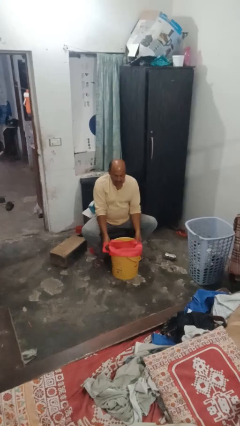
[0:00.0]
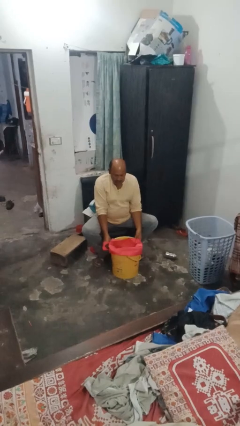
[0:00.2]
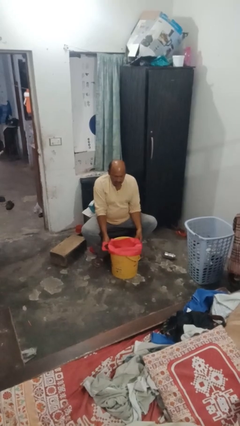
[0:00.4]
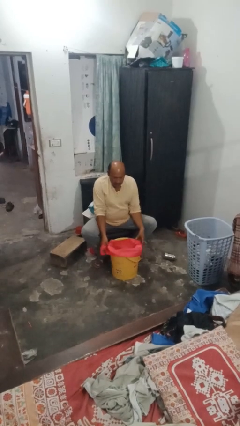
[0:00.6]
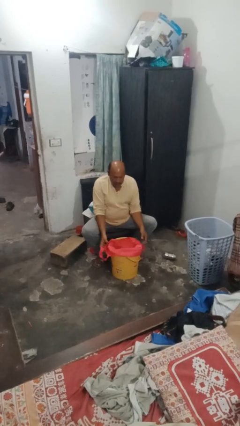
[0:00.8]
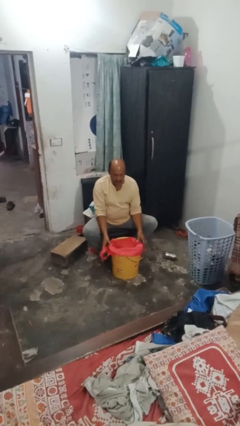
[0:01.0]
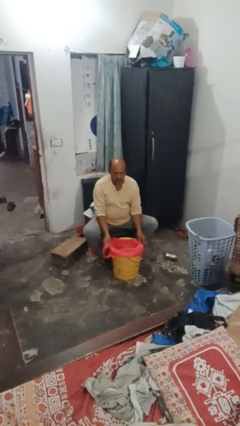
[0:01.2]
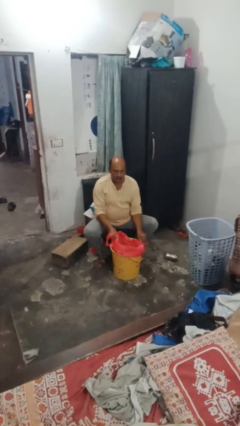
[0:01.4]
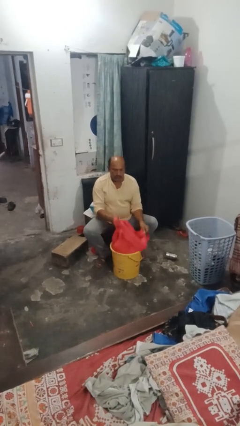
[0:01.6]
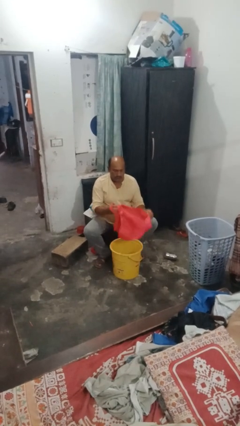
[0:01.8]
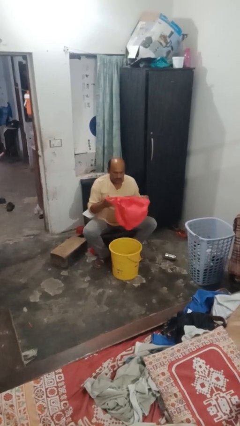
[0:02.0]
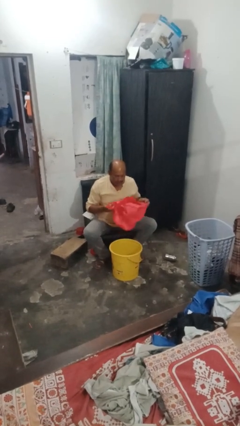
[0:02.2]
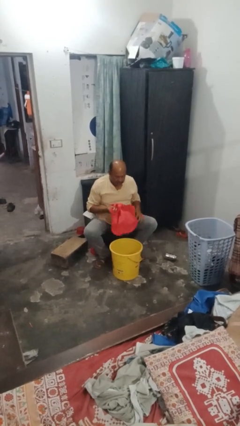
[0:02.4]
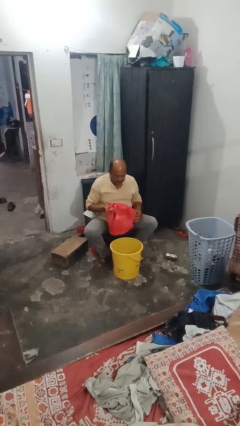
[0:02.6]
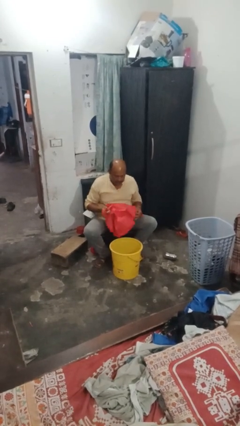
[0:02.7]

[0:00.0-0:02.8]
person removes trashbag from trashcan

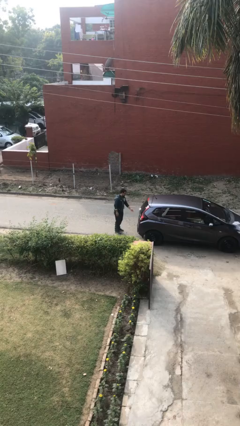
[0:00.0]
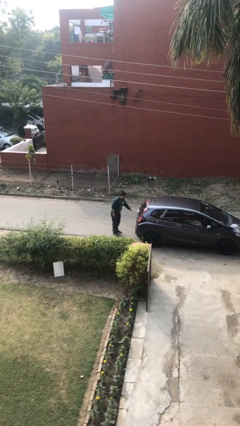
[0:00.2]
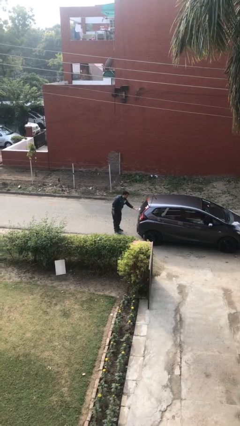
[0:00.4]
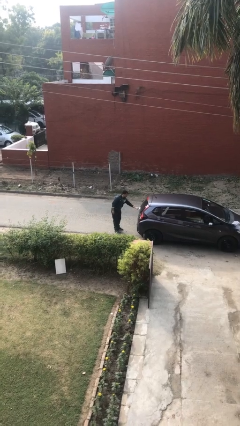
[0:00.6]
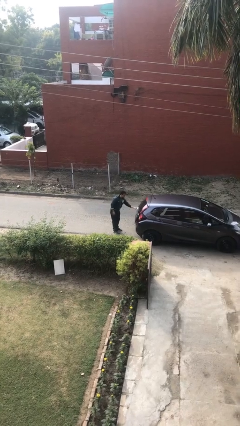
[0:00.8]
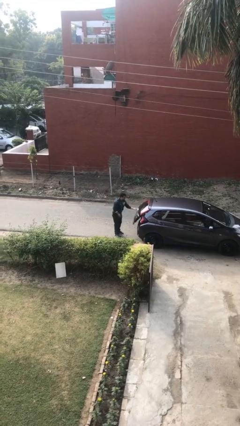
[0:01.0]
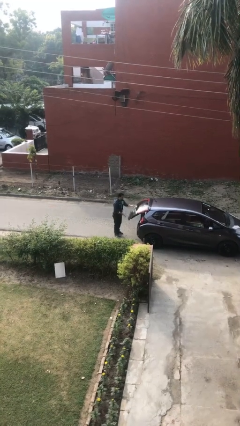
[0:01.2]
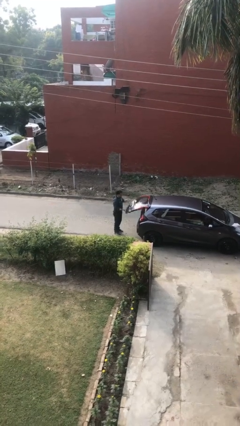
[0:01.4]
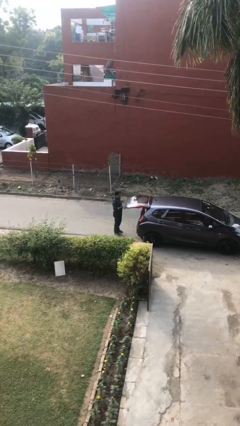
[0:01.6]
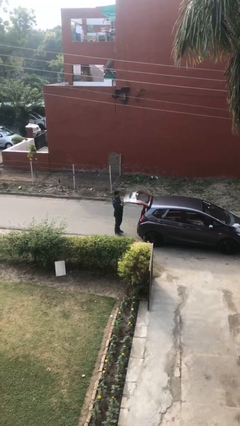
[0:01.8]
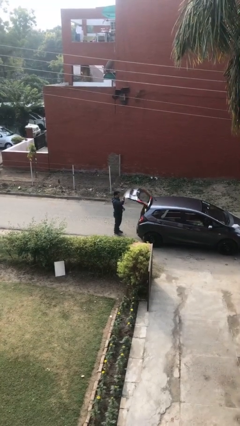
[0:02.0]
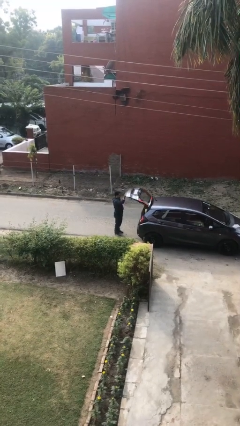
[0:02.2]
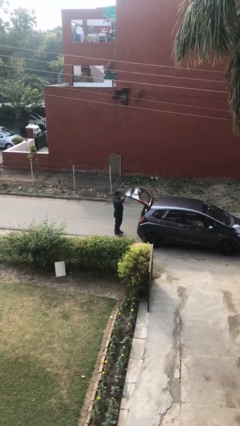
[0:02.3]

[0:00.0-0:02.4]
person opens car trunk

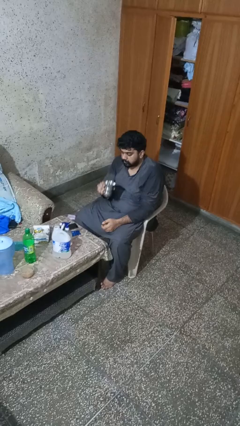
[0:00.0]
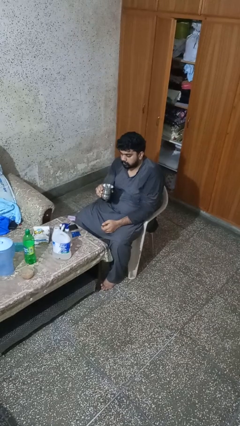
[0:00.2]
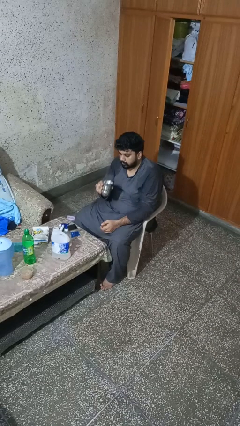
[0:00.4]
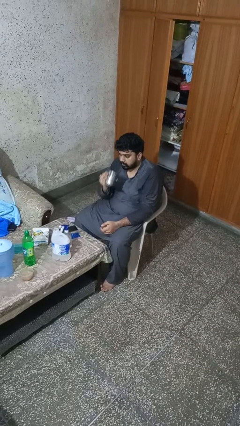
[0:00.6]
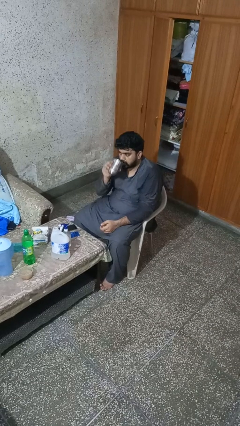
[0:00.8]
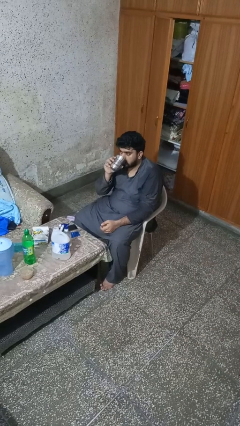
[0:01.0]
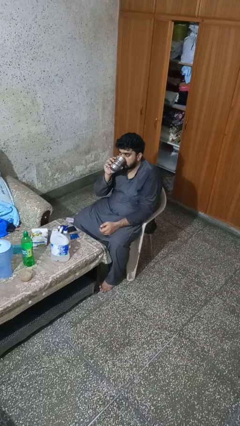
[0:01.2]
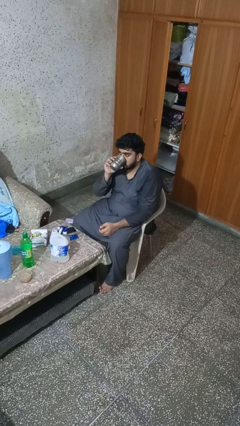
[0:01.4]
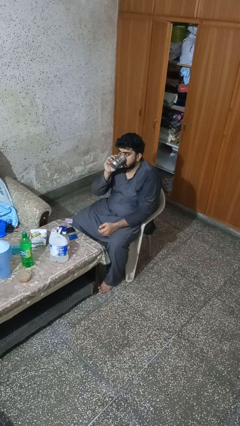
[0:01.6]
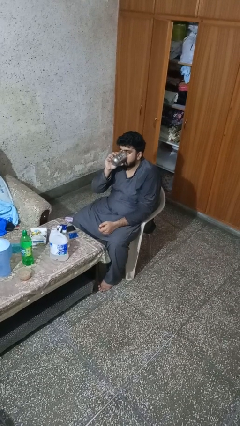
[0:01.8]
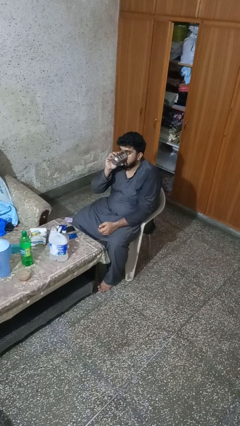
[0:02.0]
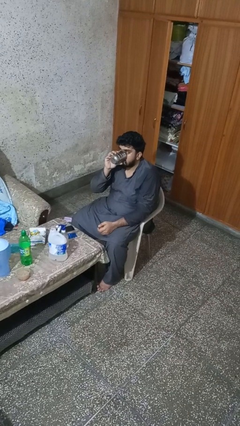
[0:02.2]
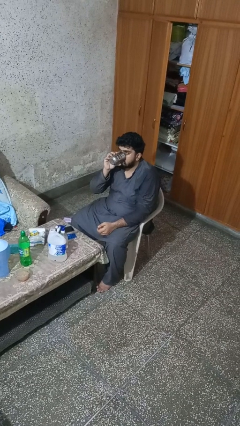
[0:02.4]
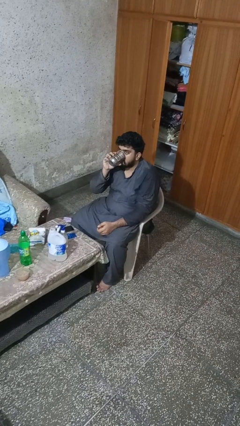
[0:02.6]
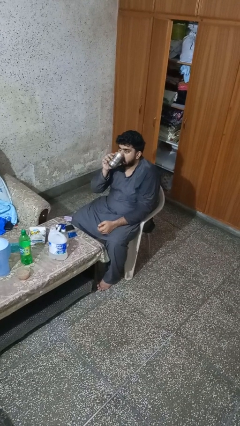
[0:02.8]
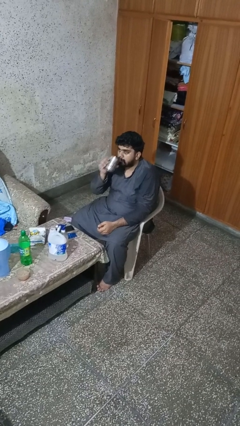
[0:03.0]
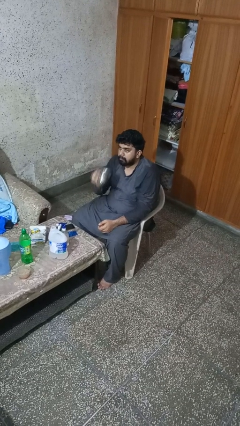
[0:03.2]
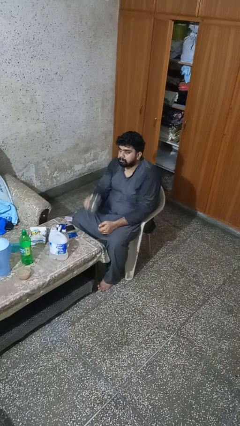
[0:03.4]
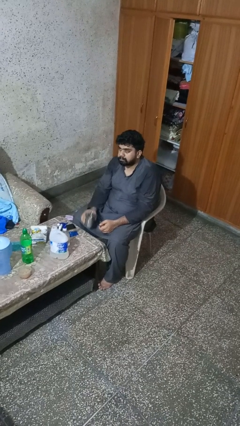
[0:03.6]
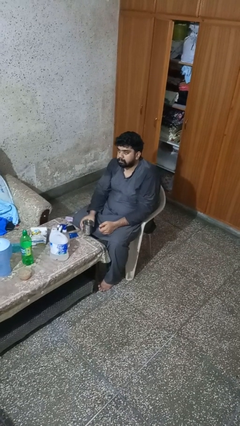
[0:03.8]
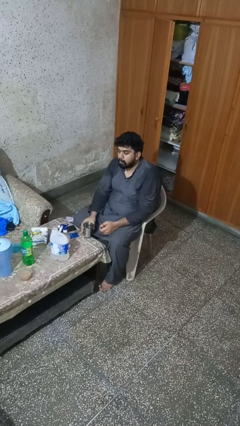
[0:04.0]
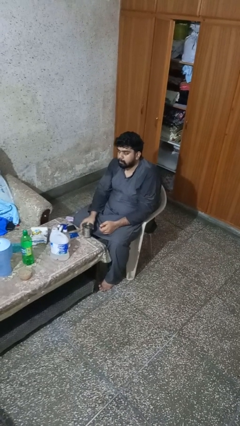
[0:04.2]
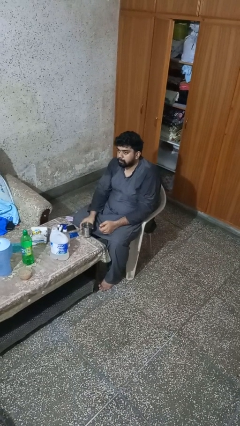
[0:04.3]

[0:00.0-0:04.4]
person drinks from cup

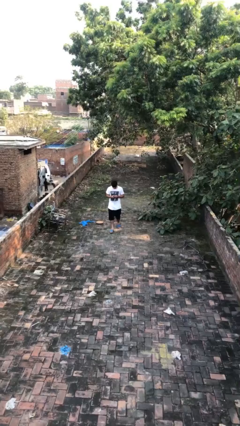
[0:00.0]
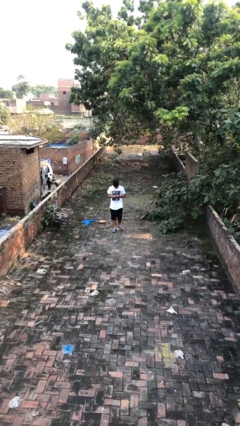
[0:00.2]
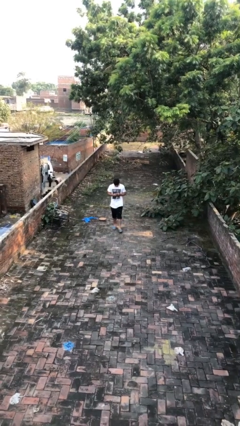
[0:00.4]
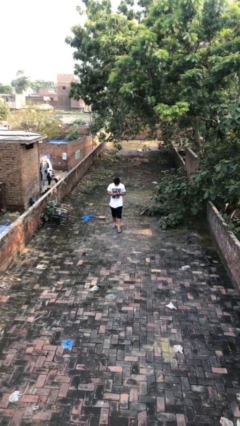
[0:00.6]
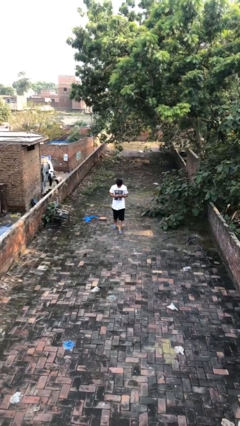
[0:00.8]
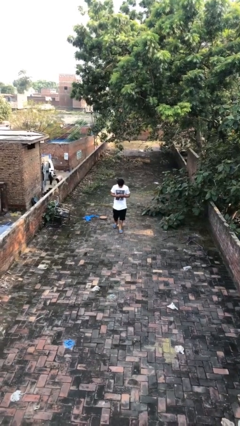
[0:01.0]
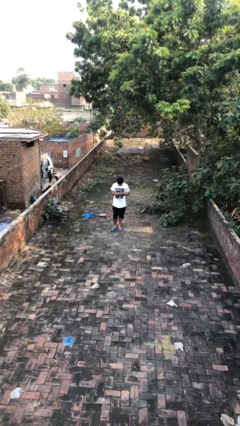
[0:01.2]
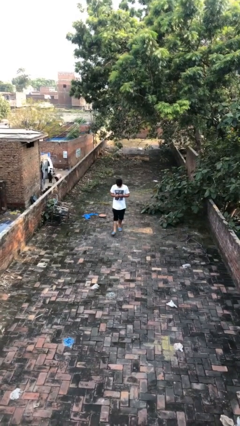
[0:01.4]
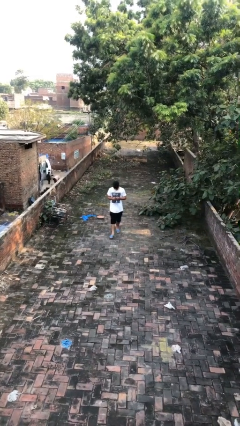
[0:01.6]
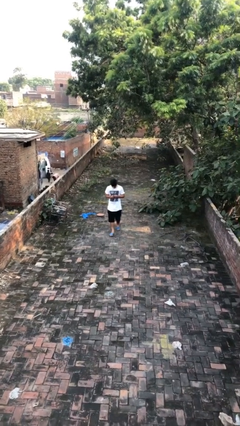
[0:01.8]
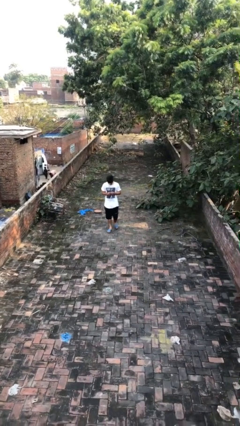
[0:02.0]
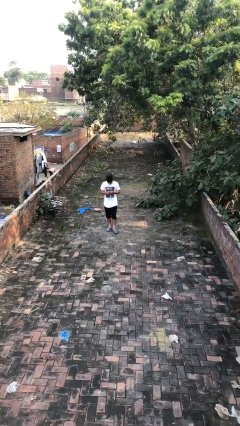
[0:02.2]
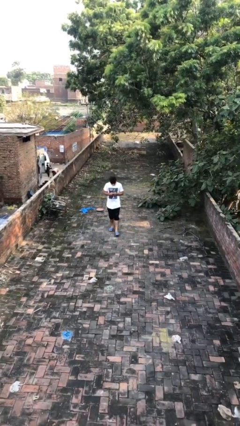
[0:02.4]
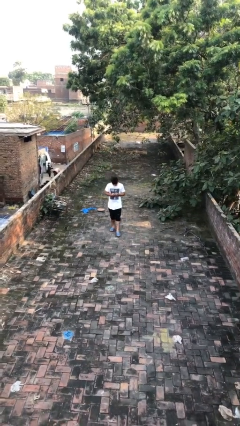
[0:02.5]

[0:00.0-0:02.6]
person texts on phone

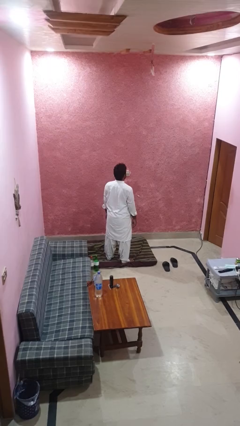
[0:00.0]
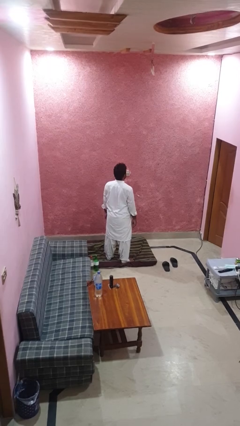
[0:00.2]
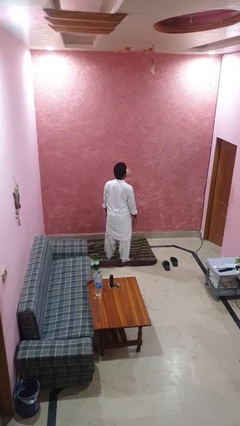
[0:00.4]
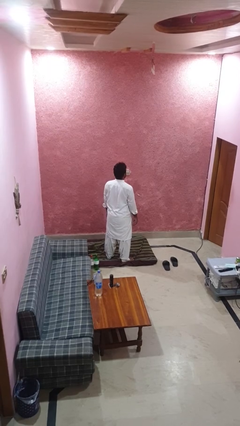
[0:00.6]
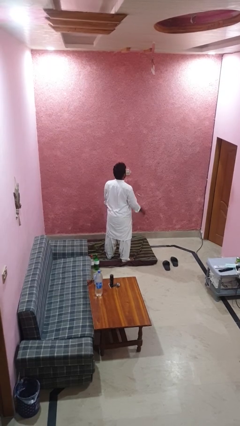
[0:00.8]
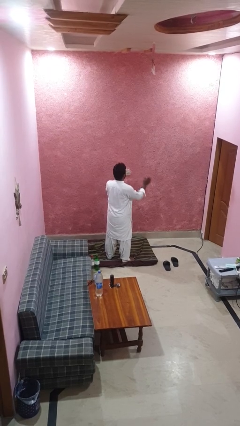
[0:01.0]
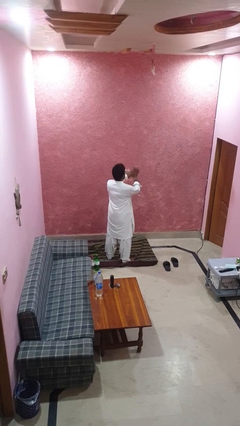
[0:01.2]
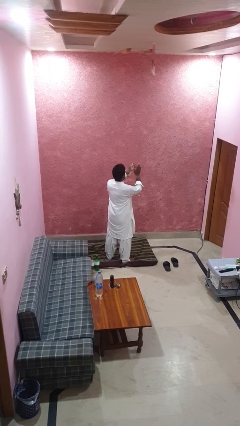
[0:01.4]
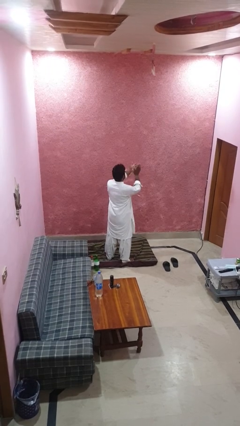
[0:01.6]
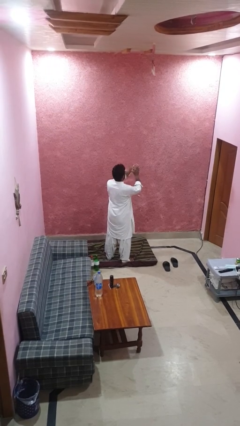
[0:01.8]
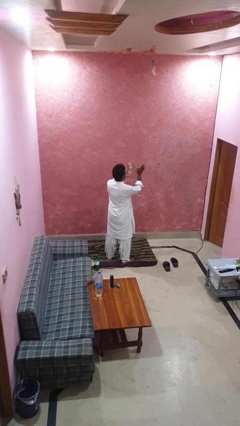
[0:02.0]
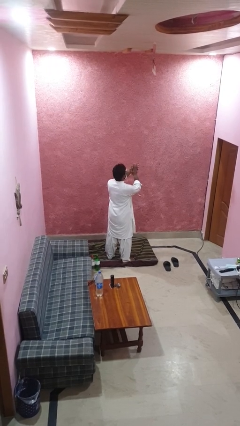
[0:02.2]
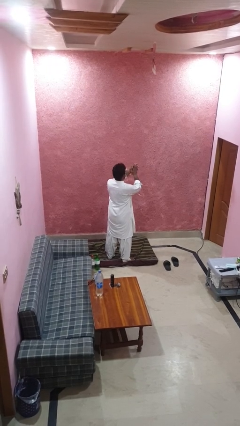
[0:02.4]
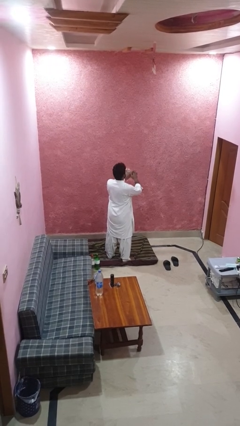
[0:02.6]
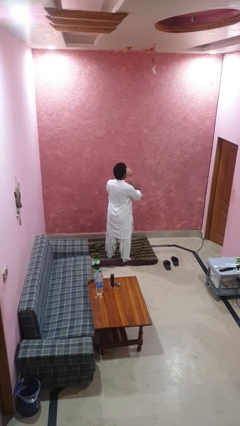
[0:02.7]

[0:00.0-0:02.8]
person claps hands

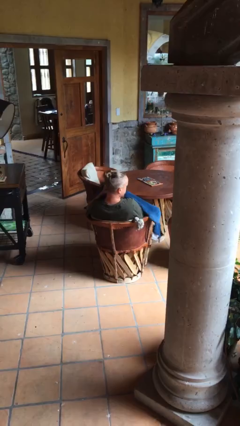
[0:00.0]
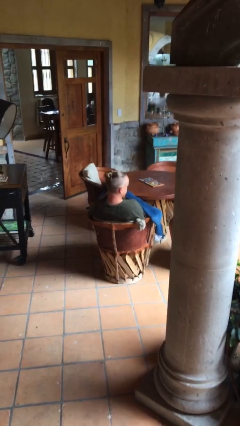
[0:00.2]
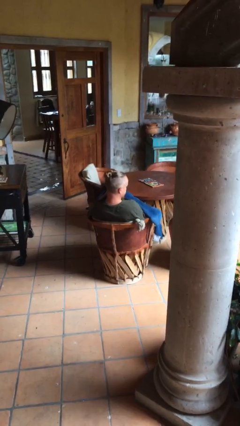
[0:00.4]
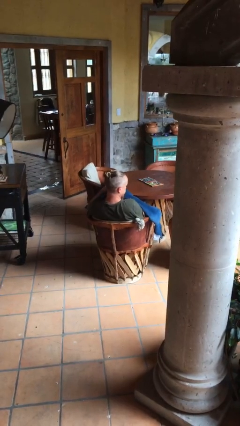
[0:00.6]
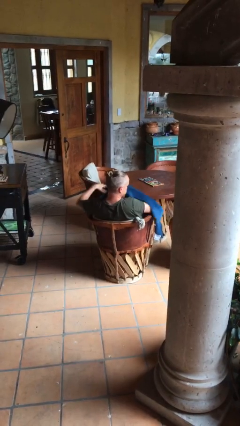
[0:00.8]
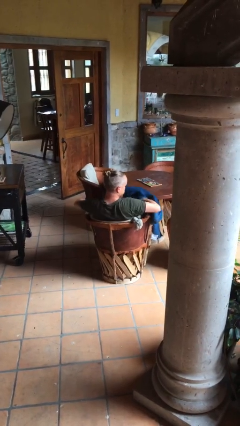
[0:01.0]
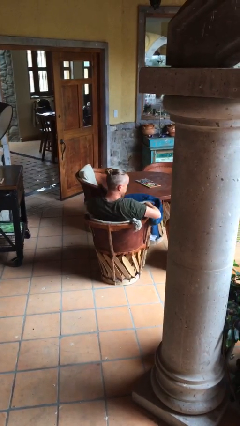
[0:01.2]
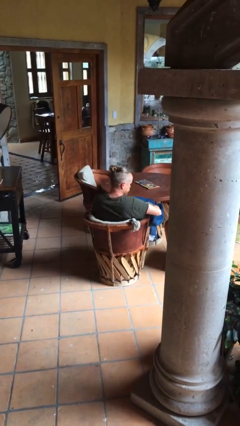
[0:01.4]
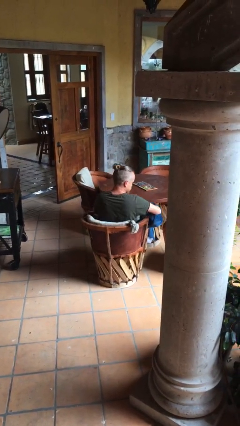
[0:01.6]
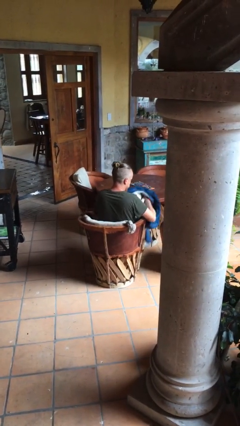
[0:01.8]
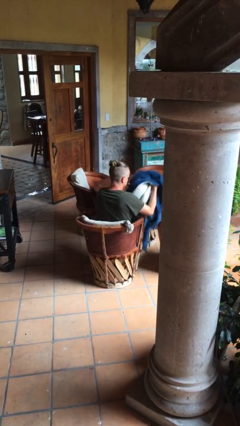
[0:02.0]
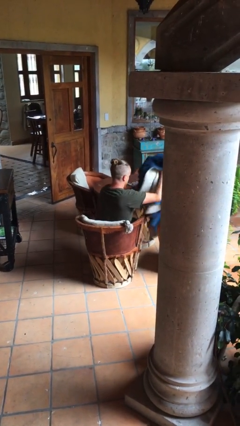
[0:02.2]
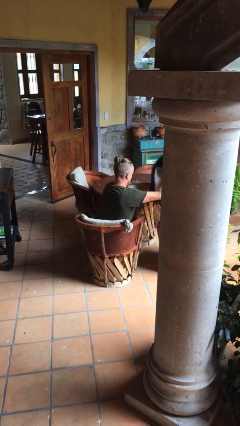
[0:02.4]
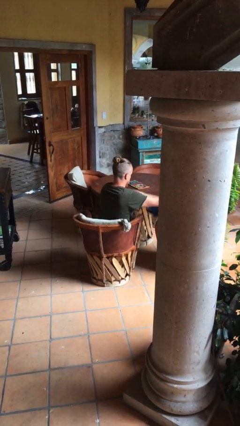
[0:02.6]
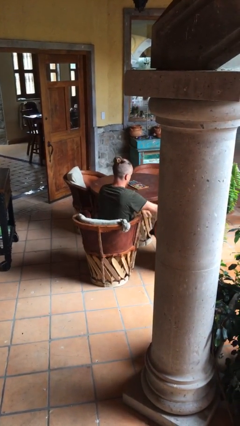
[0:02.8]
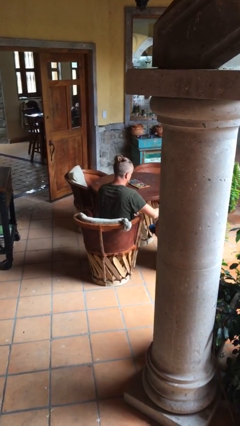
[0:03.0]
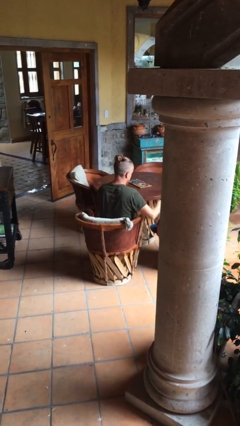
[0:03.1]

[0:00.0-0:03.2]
person uncovers with blanket
